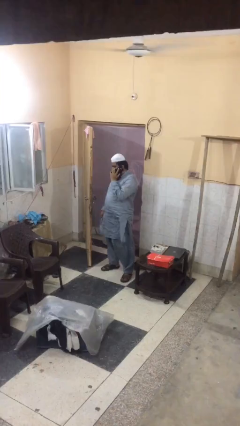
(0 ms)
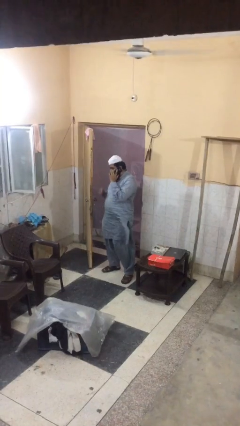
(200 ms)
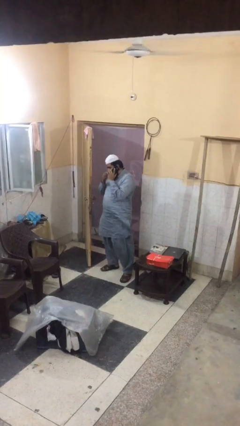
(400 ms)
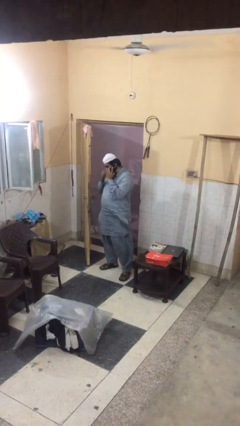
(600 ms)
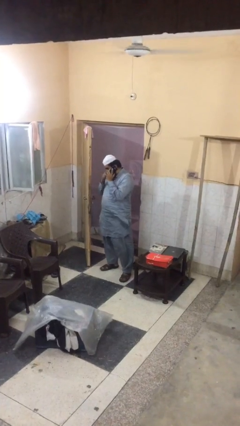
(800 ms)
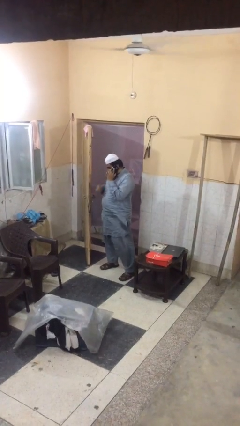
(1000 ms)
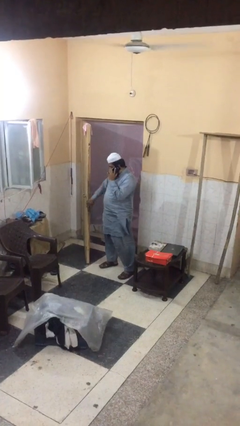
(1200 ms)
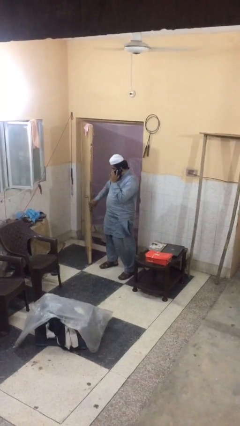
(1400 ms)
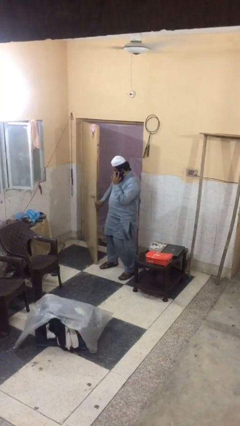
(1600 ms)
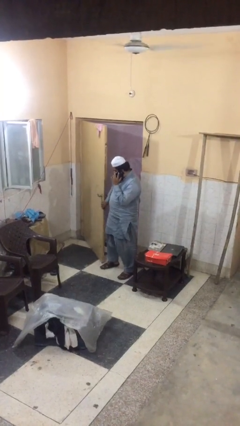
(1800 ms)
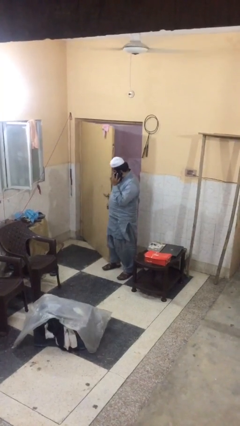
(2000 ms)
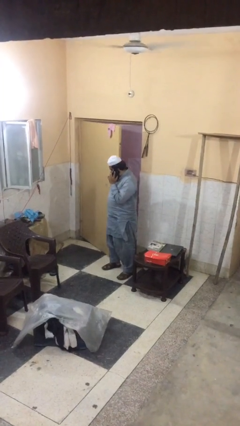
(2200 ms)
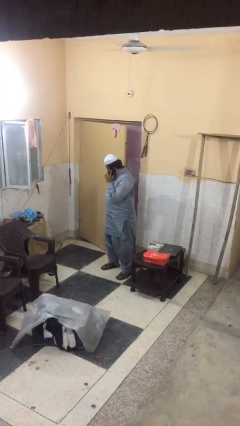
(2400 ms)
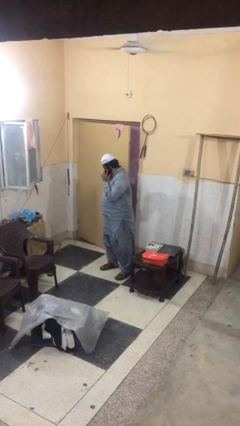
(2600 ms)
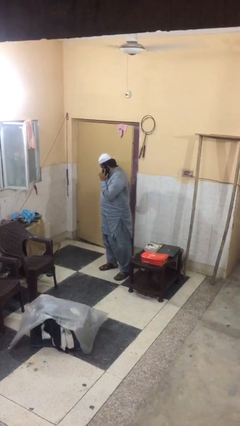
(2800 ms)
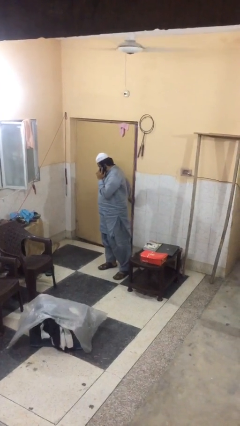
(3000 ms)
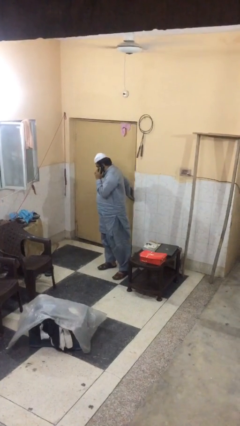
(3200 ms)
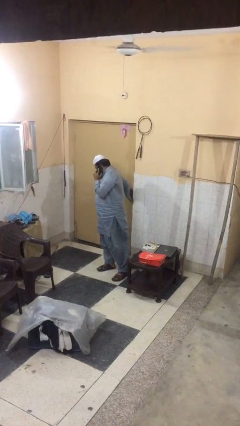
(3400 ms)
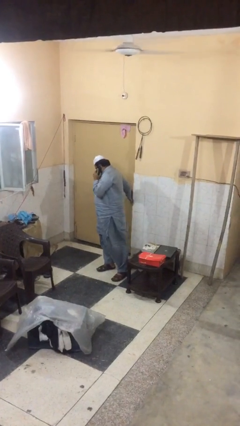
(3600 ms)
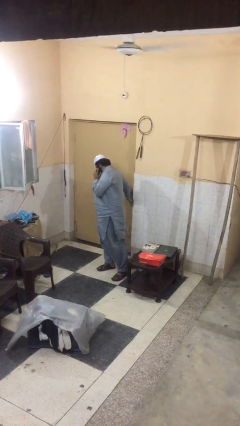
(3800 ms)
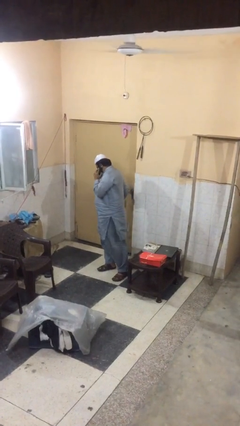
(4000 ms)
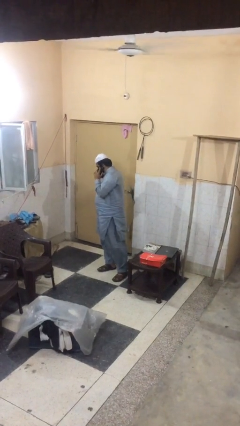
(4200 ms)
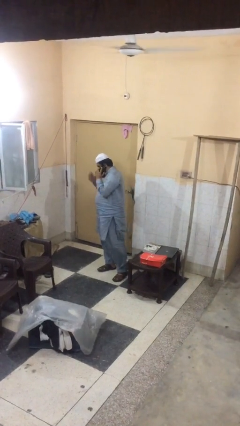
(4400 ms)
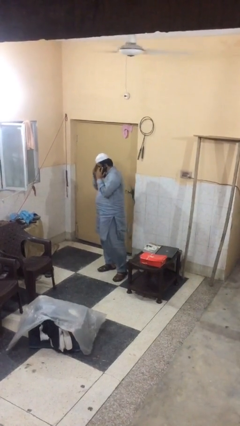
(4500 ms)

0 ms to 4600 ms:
person closes facility door

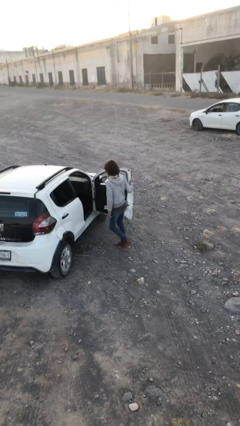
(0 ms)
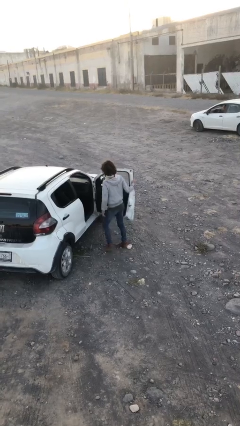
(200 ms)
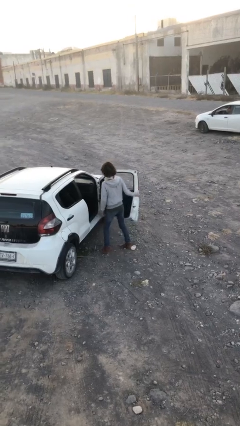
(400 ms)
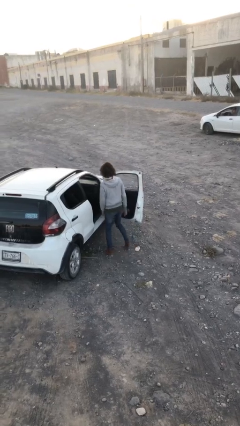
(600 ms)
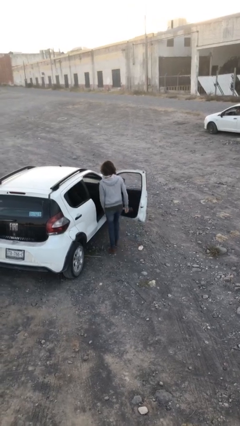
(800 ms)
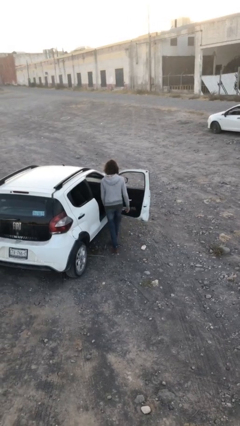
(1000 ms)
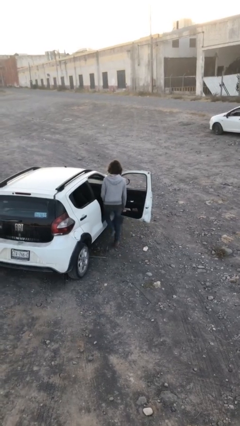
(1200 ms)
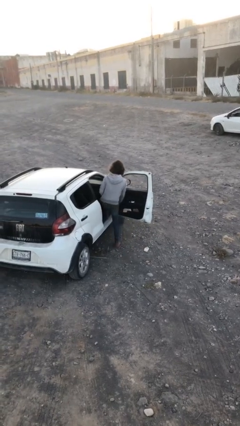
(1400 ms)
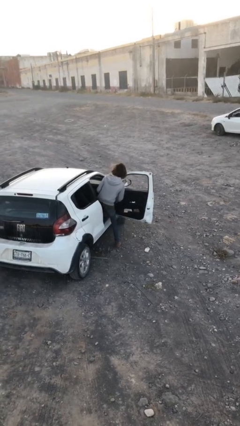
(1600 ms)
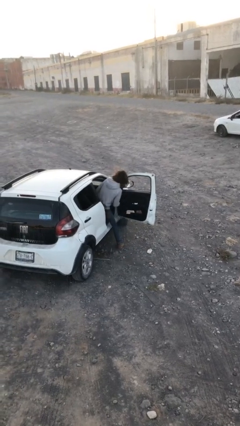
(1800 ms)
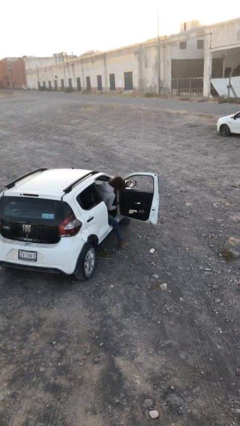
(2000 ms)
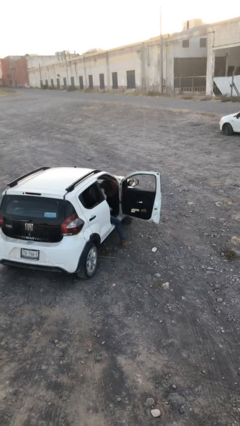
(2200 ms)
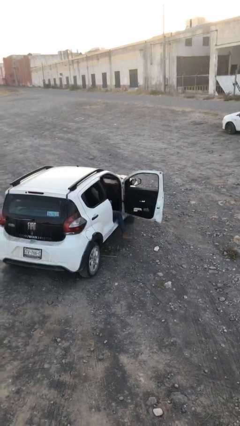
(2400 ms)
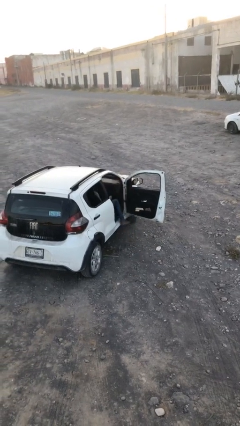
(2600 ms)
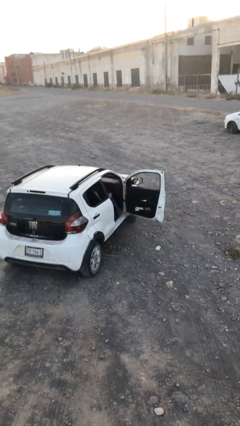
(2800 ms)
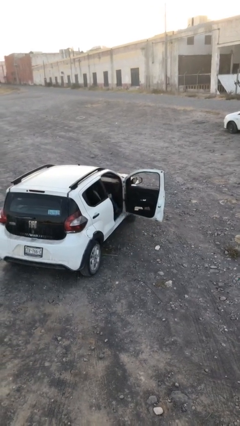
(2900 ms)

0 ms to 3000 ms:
person enters car

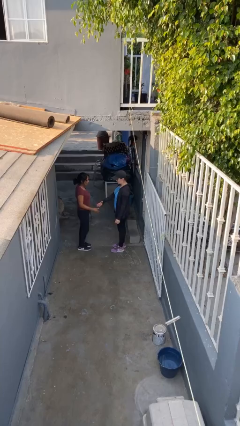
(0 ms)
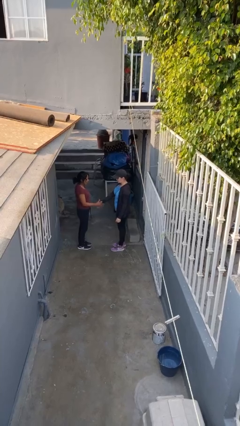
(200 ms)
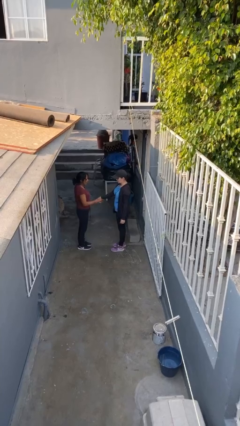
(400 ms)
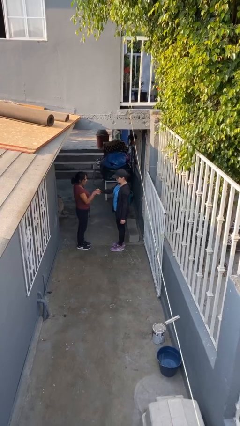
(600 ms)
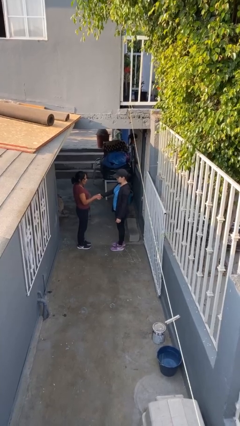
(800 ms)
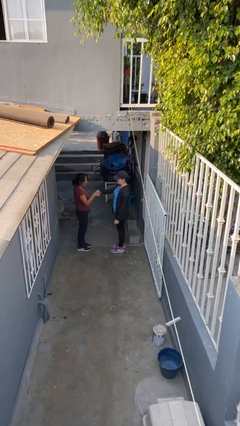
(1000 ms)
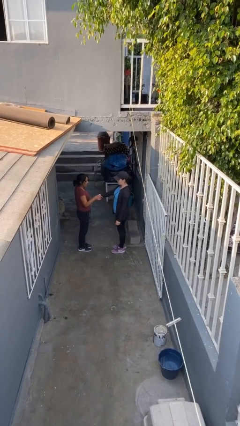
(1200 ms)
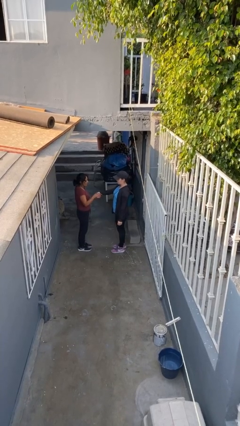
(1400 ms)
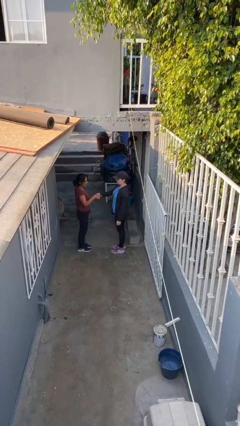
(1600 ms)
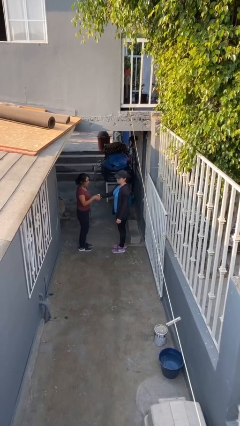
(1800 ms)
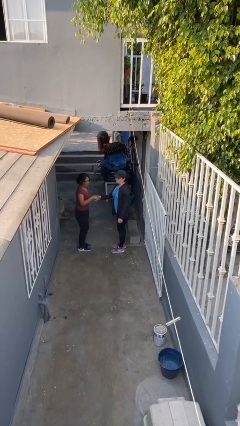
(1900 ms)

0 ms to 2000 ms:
person shakes hand

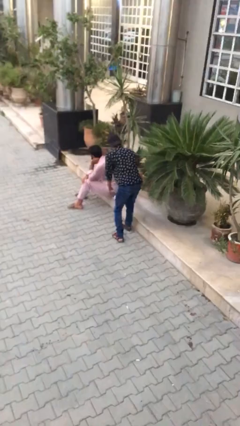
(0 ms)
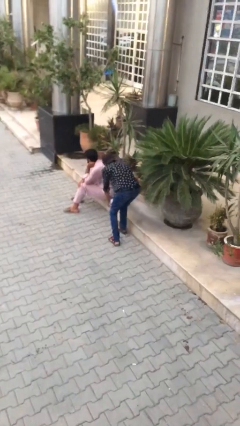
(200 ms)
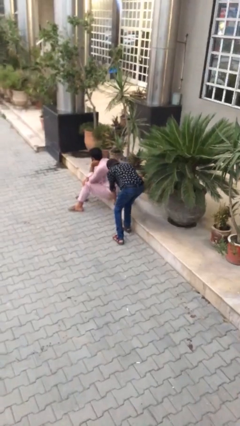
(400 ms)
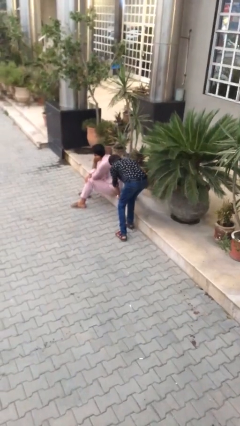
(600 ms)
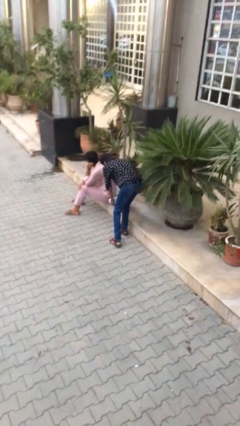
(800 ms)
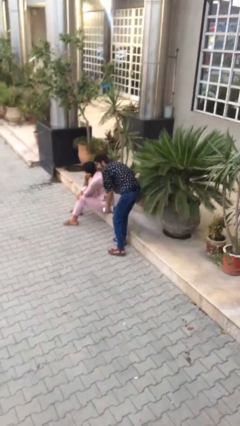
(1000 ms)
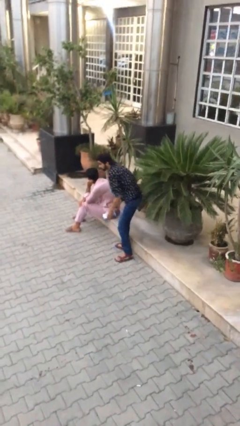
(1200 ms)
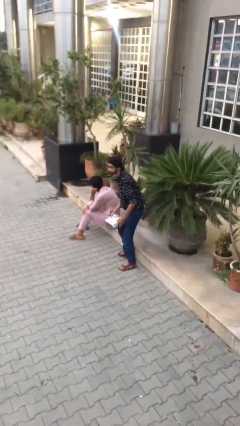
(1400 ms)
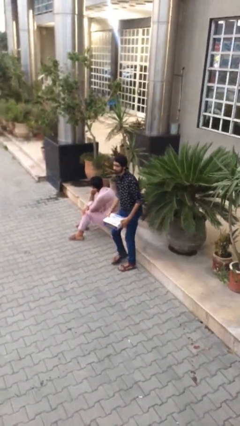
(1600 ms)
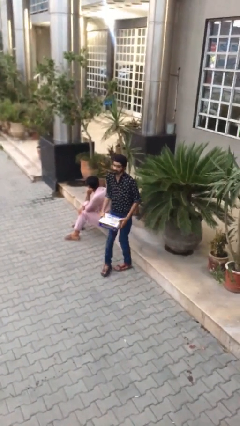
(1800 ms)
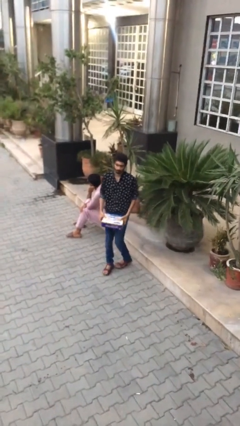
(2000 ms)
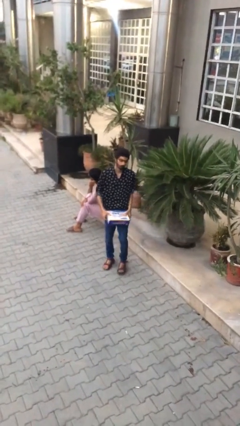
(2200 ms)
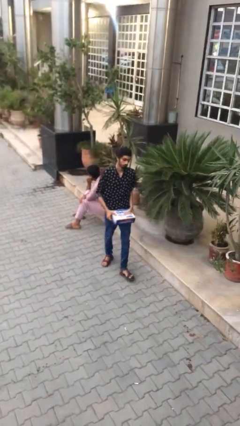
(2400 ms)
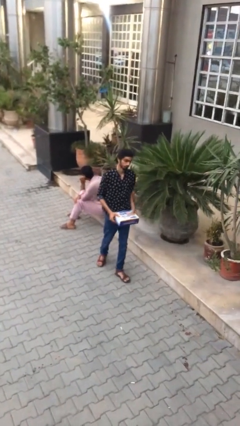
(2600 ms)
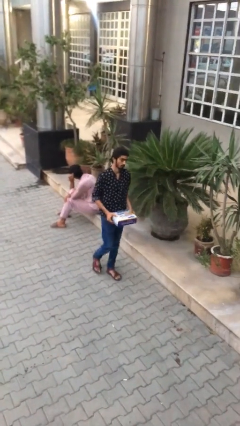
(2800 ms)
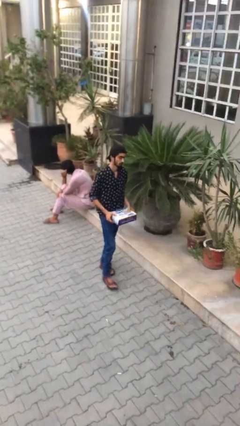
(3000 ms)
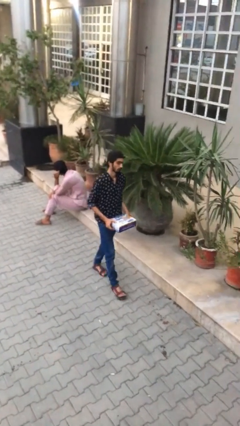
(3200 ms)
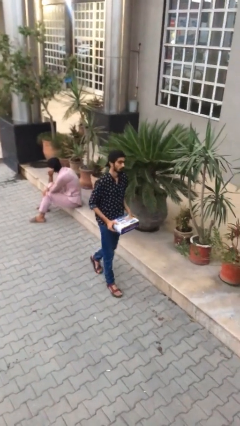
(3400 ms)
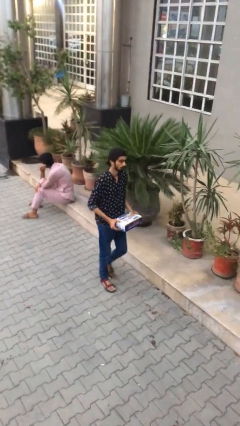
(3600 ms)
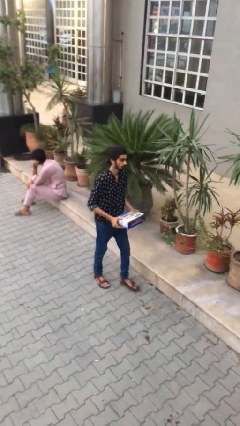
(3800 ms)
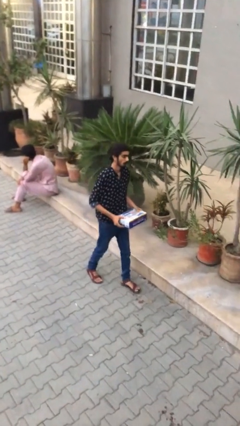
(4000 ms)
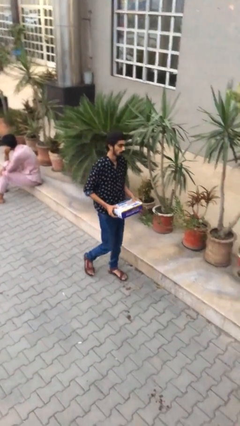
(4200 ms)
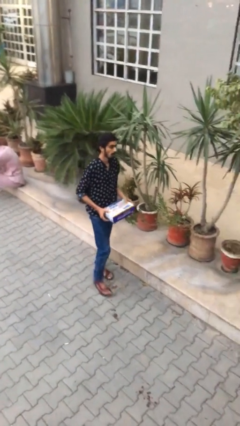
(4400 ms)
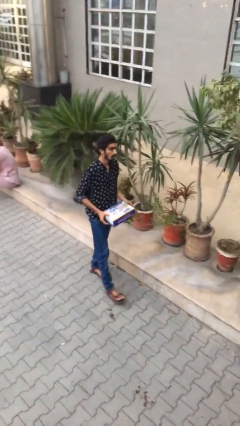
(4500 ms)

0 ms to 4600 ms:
person steals object from person

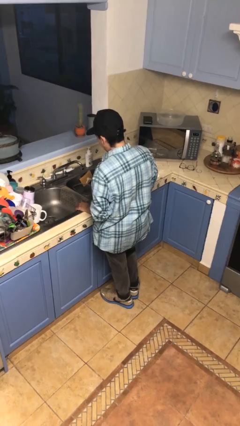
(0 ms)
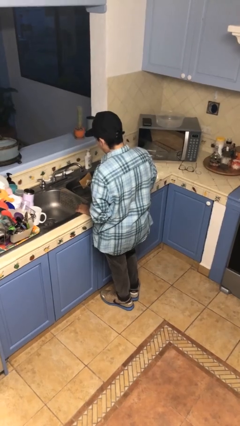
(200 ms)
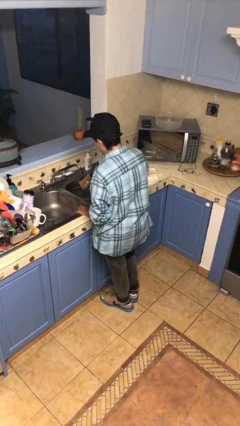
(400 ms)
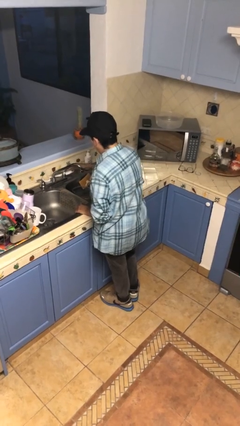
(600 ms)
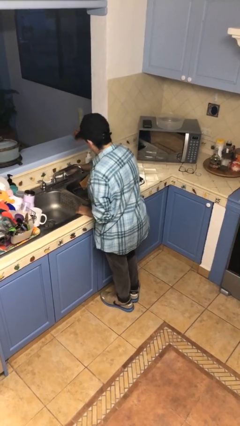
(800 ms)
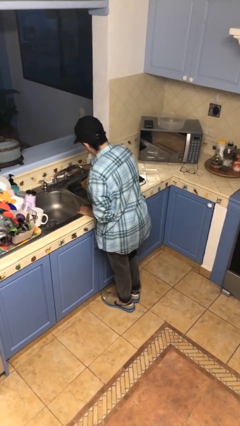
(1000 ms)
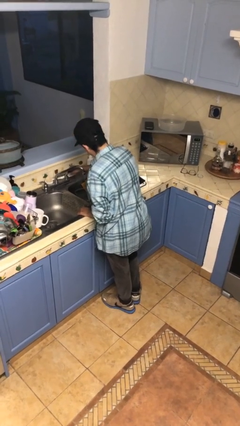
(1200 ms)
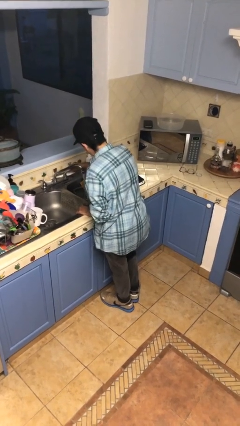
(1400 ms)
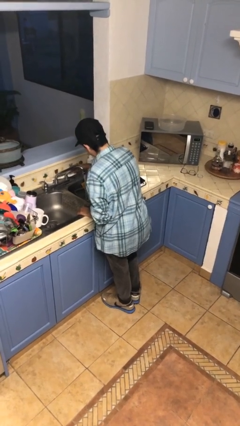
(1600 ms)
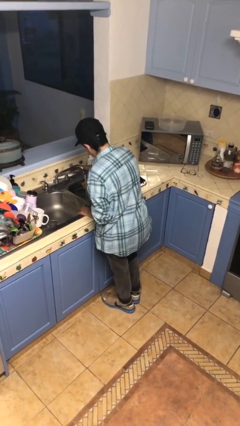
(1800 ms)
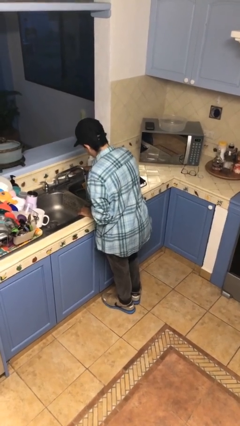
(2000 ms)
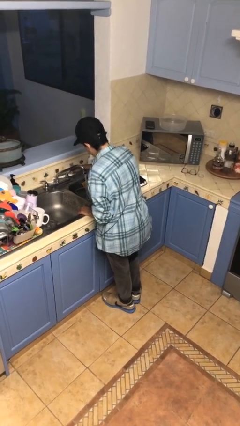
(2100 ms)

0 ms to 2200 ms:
person turns on faucet

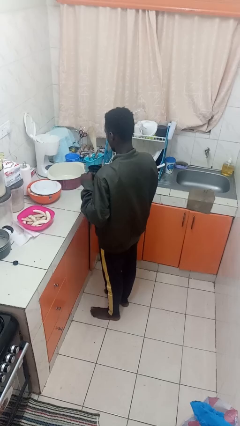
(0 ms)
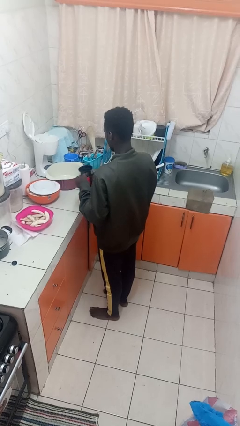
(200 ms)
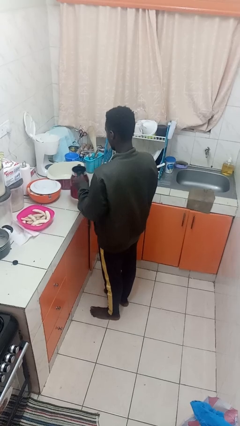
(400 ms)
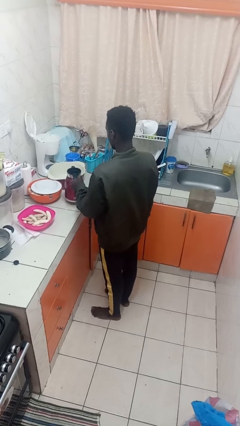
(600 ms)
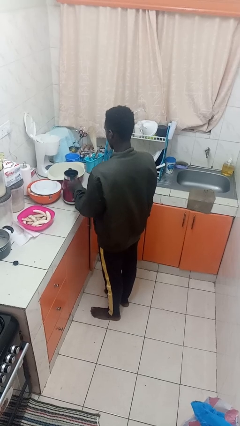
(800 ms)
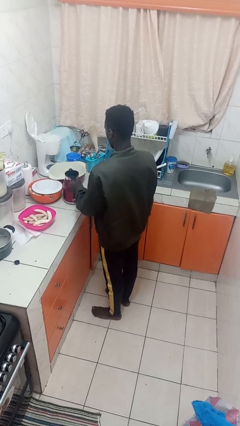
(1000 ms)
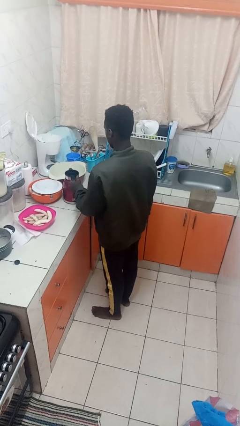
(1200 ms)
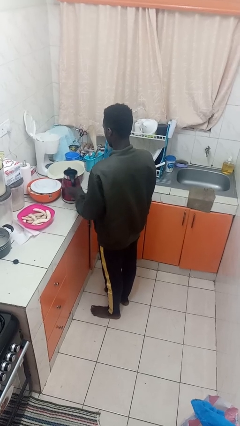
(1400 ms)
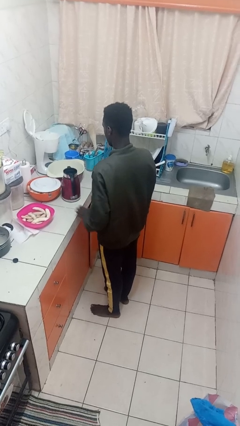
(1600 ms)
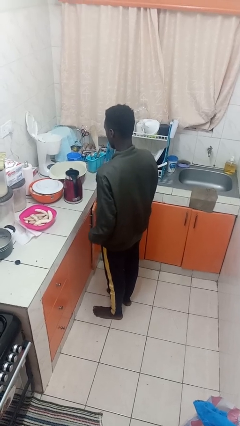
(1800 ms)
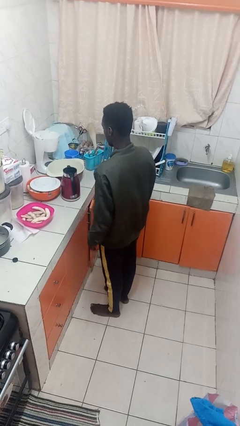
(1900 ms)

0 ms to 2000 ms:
person puts down object on countertop
